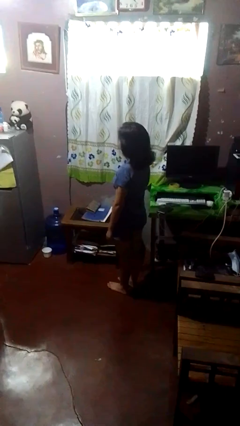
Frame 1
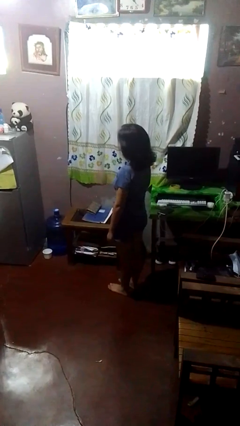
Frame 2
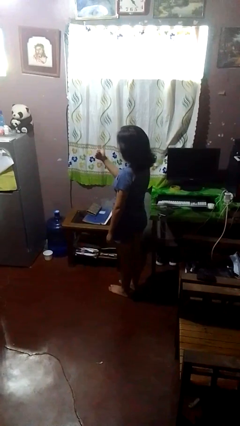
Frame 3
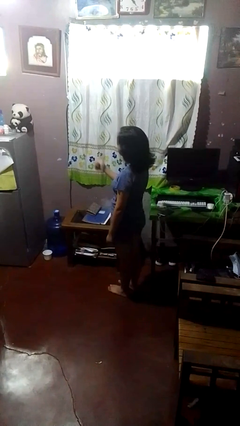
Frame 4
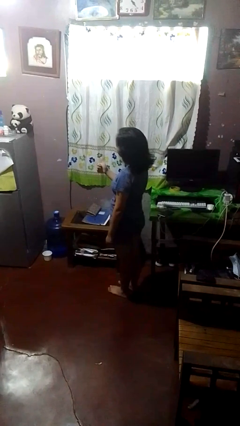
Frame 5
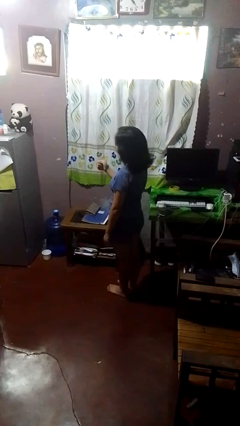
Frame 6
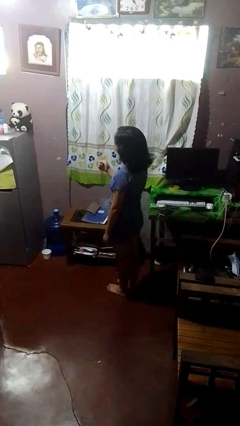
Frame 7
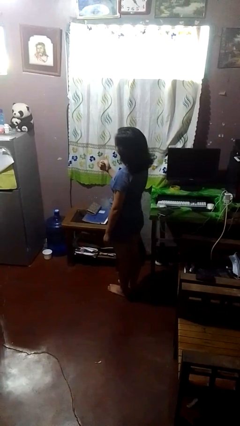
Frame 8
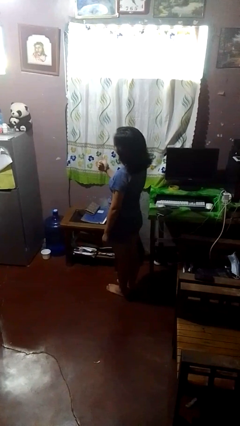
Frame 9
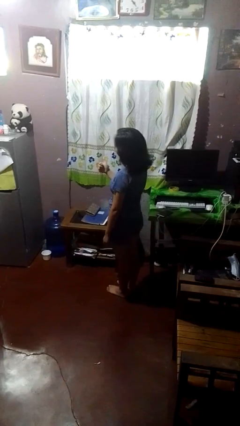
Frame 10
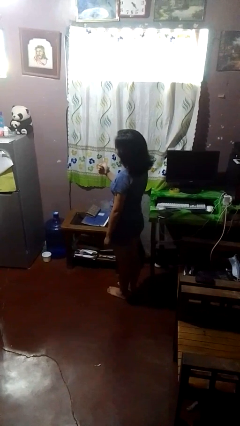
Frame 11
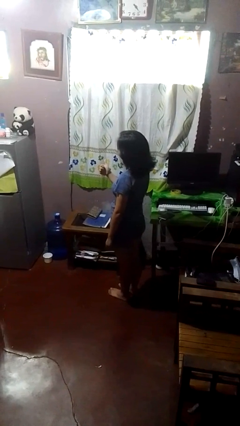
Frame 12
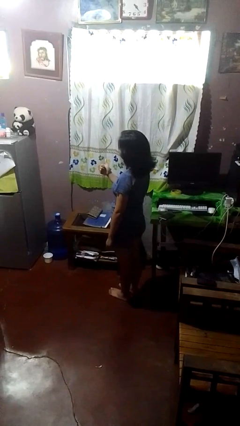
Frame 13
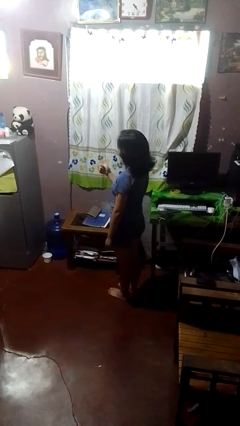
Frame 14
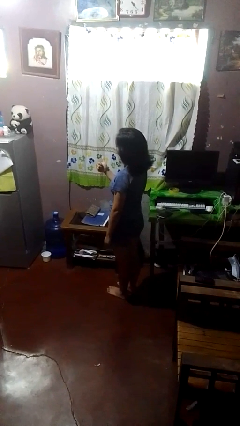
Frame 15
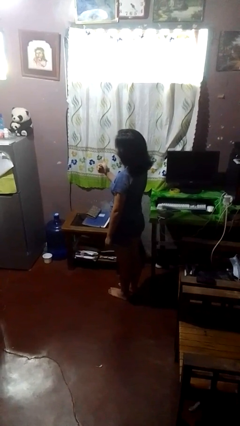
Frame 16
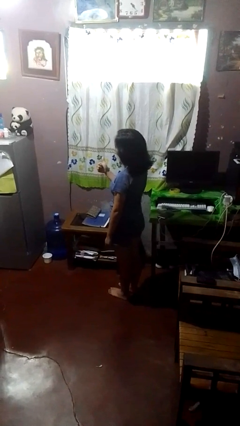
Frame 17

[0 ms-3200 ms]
person gestures thumbs up

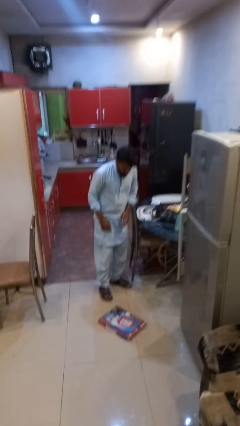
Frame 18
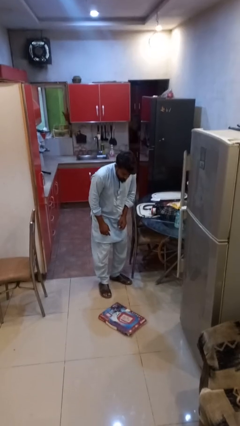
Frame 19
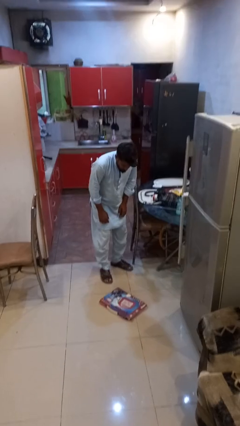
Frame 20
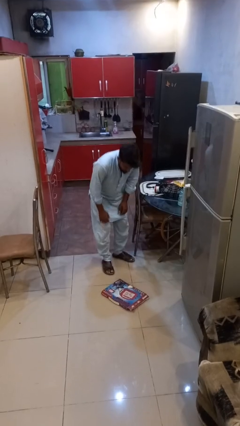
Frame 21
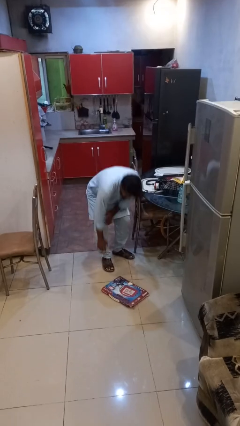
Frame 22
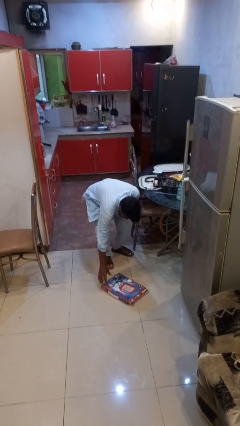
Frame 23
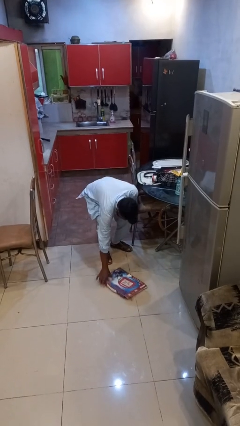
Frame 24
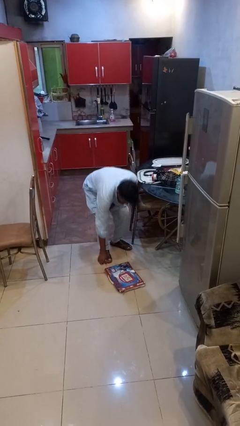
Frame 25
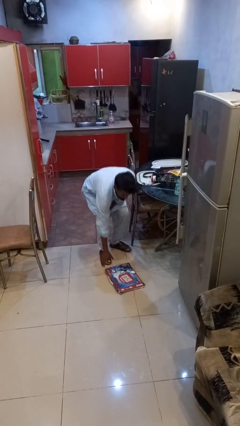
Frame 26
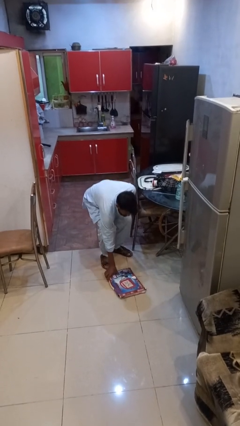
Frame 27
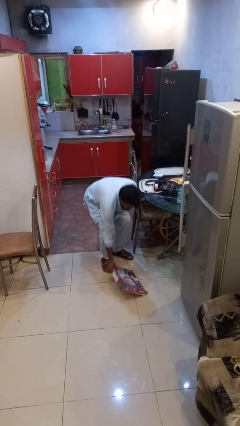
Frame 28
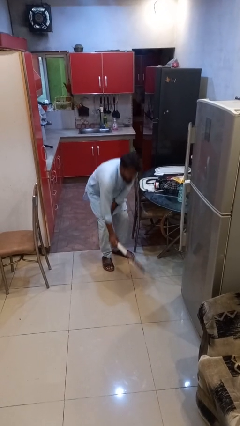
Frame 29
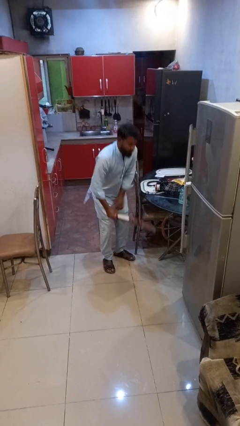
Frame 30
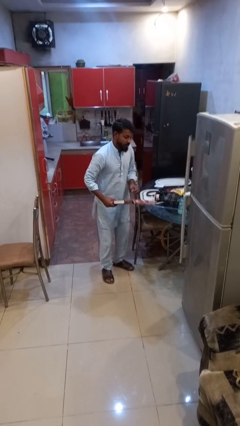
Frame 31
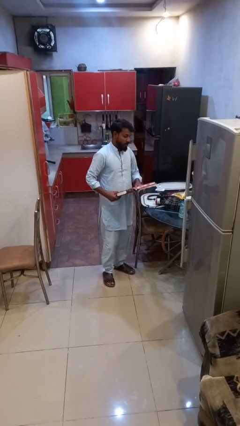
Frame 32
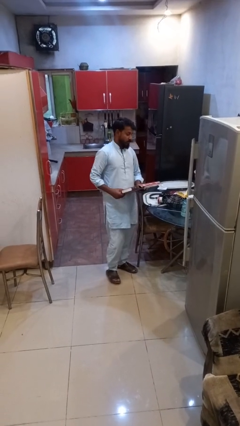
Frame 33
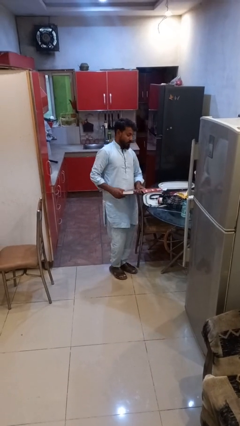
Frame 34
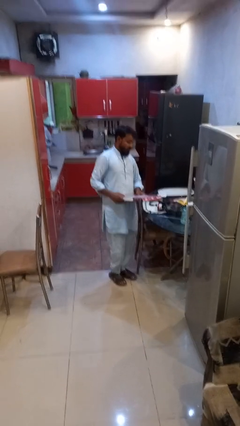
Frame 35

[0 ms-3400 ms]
person picks up object from floor

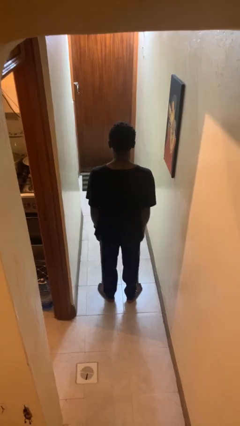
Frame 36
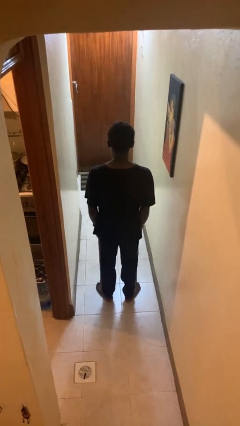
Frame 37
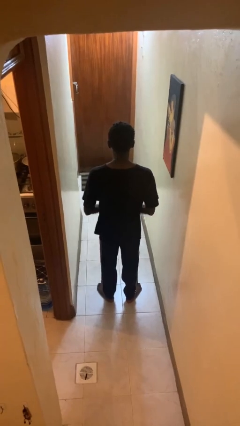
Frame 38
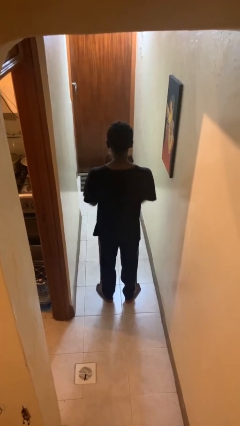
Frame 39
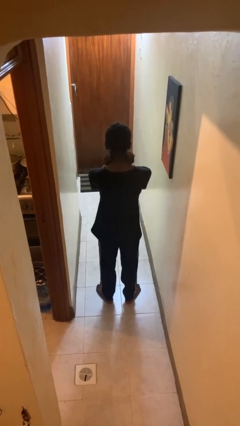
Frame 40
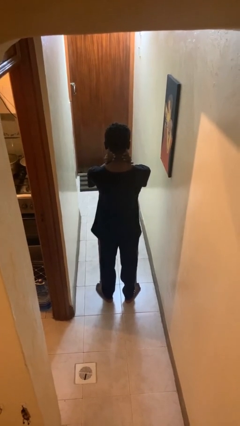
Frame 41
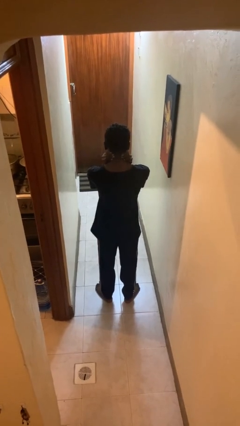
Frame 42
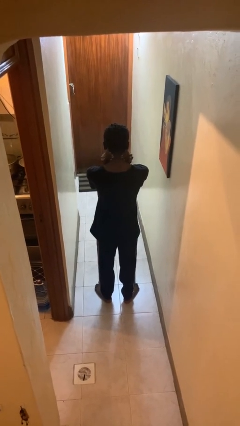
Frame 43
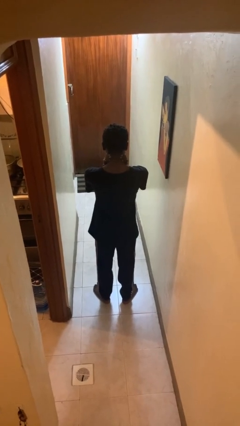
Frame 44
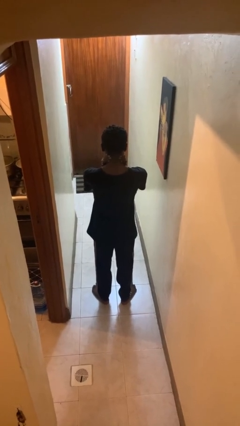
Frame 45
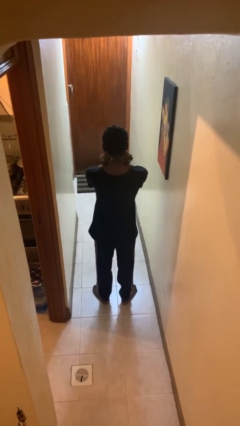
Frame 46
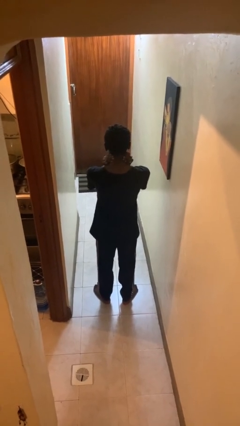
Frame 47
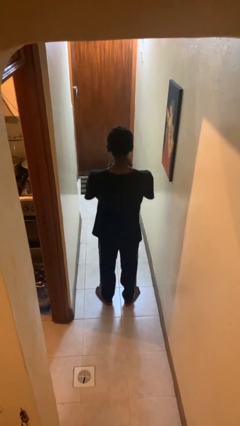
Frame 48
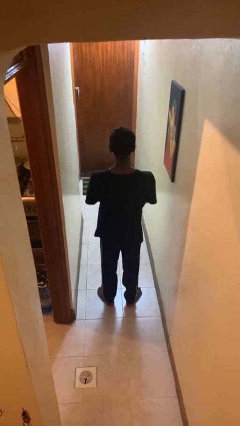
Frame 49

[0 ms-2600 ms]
person rubs neck

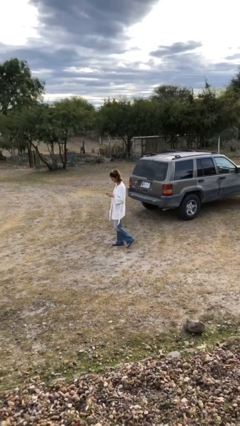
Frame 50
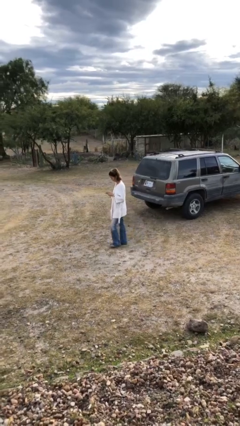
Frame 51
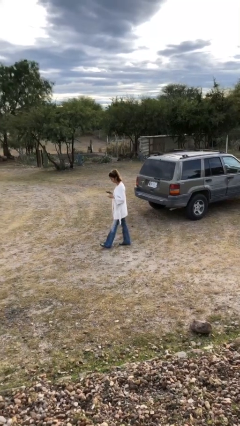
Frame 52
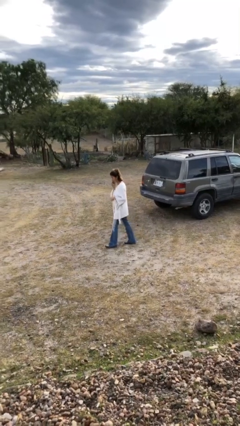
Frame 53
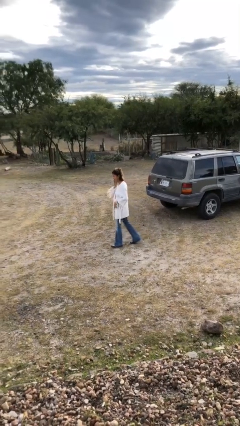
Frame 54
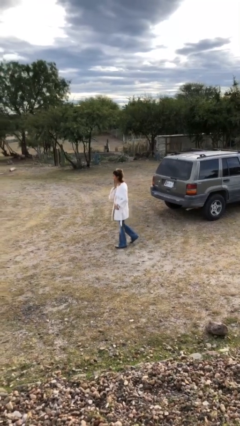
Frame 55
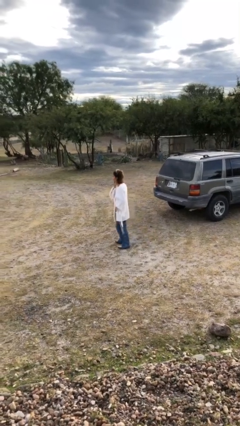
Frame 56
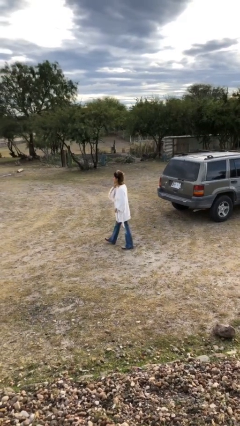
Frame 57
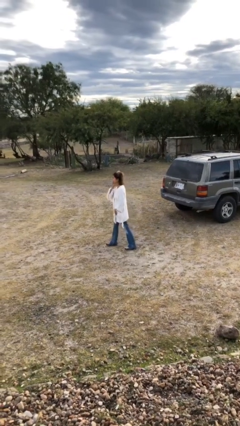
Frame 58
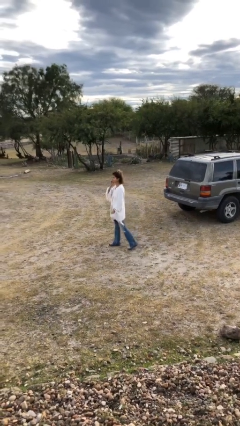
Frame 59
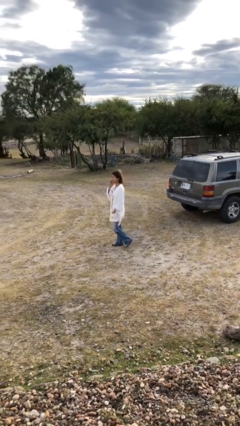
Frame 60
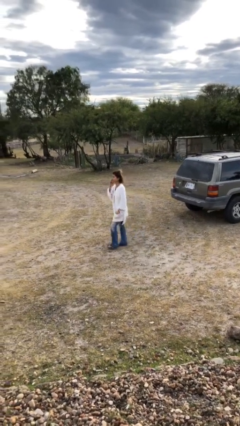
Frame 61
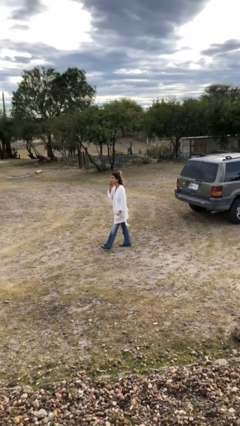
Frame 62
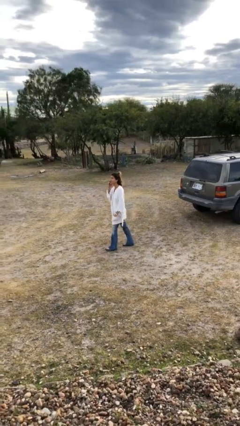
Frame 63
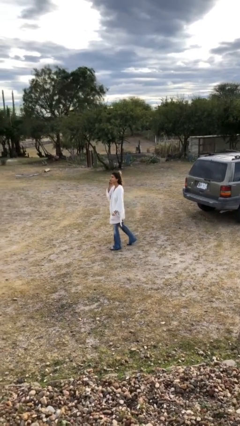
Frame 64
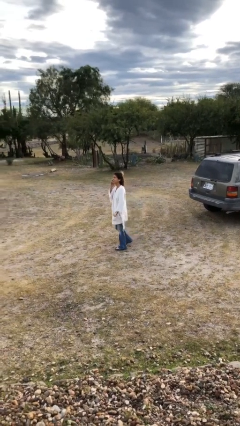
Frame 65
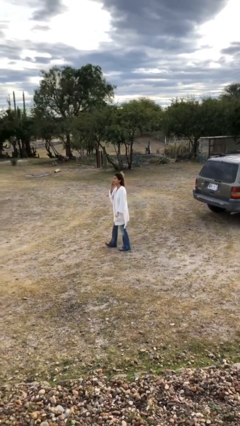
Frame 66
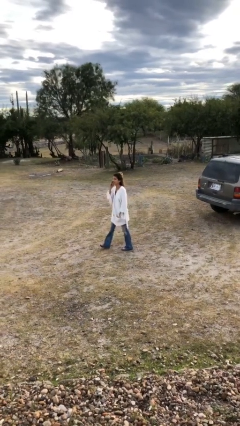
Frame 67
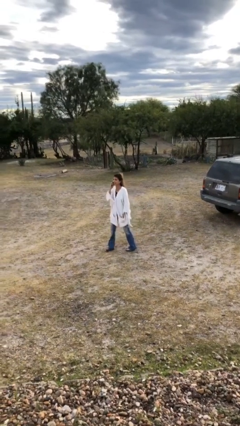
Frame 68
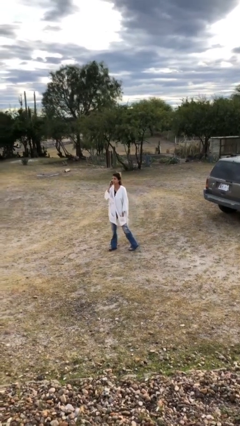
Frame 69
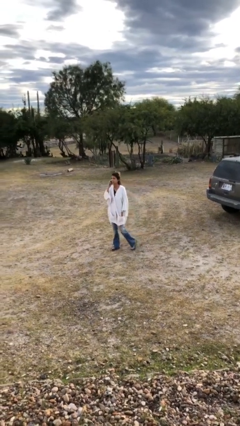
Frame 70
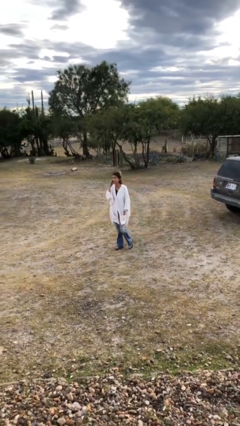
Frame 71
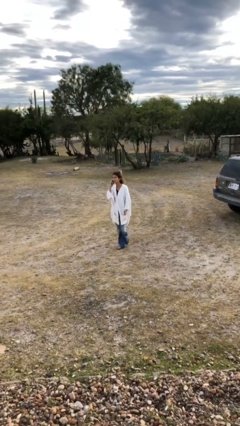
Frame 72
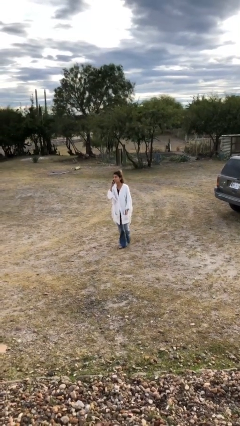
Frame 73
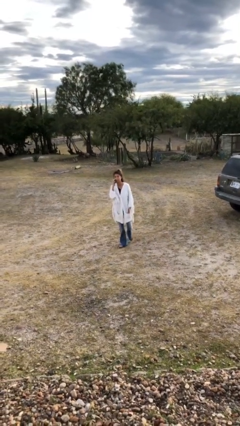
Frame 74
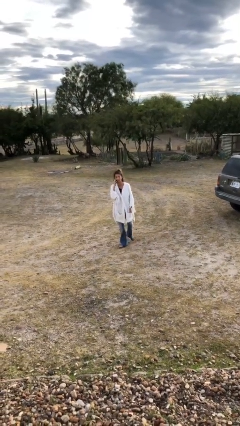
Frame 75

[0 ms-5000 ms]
person talks on phone

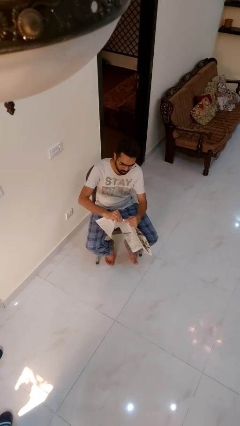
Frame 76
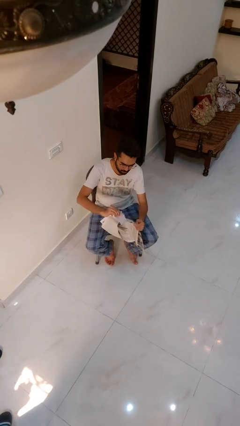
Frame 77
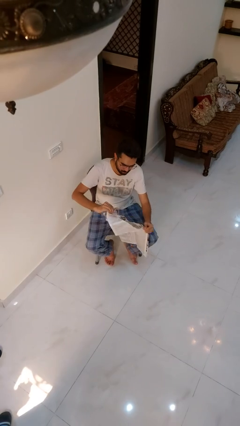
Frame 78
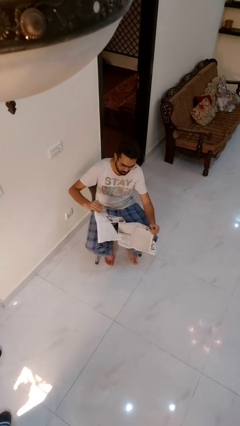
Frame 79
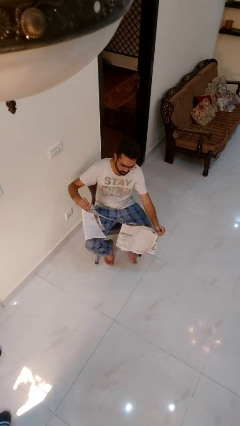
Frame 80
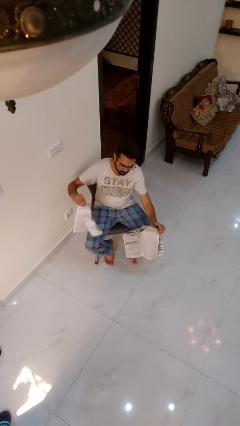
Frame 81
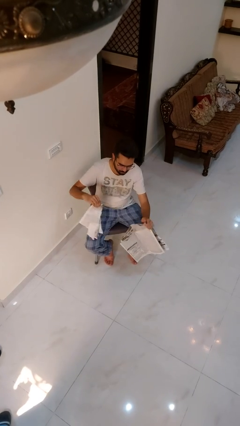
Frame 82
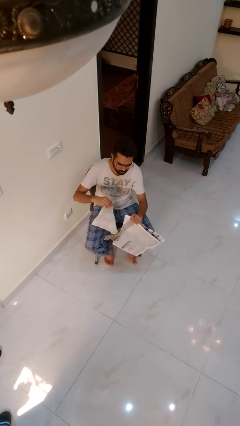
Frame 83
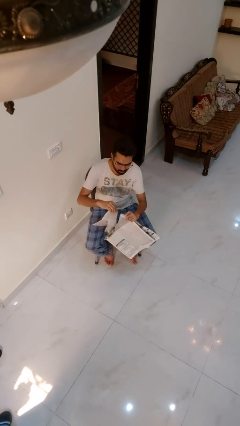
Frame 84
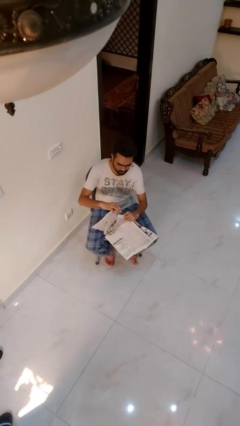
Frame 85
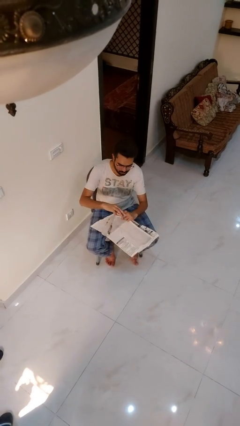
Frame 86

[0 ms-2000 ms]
person tears paper

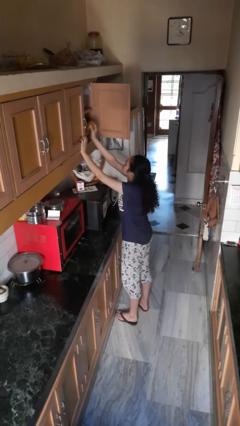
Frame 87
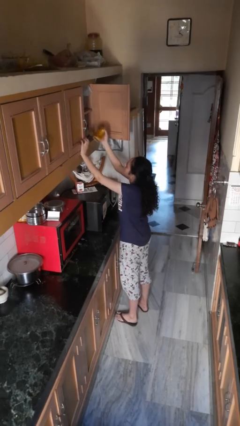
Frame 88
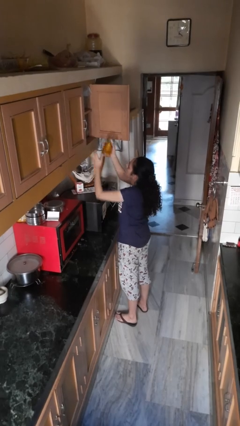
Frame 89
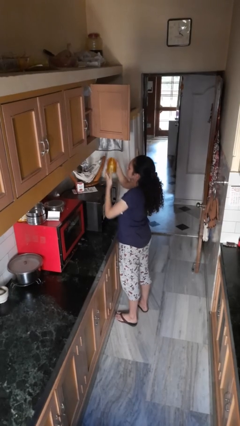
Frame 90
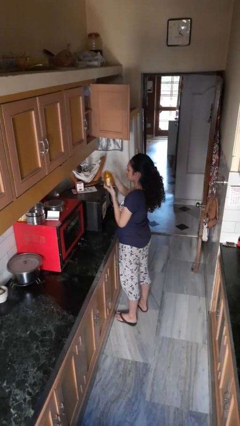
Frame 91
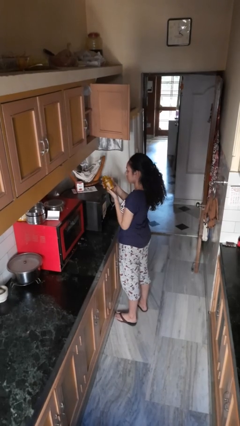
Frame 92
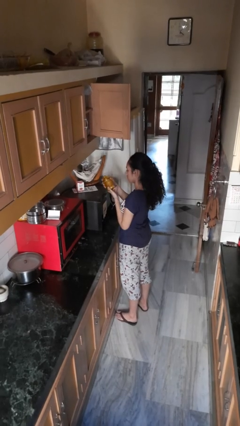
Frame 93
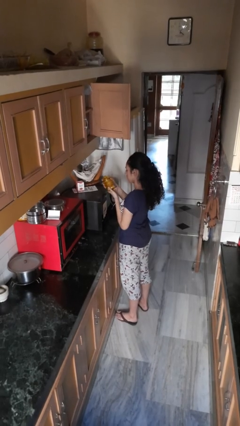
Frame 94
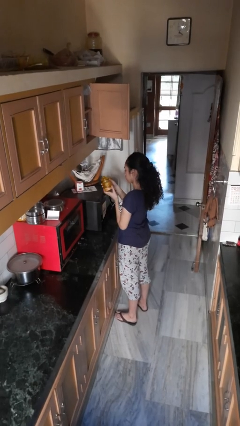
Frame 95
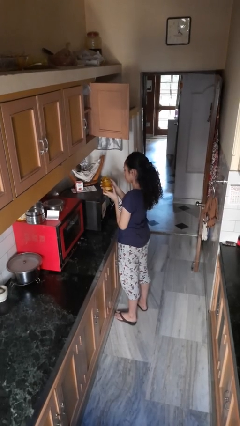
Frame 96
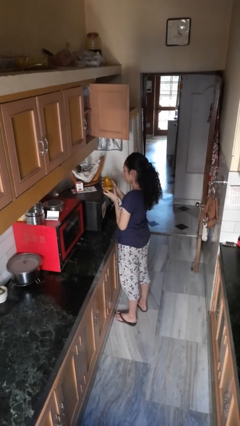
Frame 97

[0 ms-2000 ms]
person takes object from cabinet
